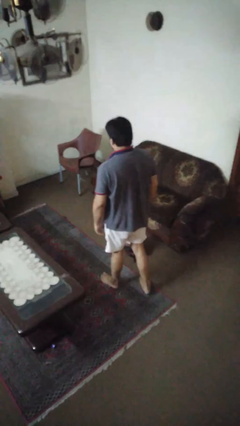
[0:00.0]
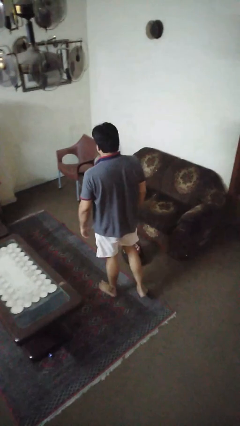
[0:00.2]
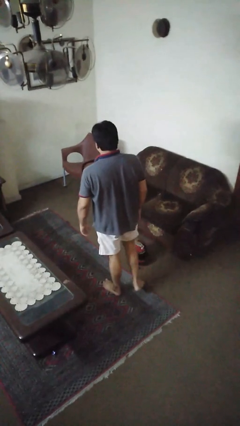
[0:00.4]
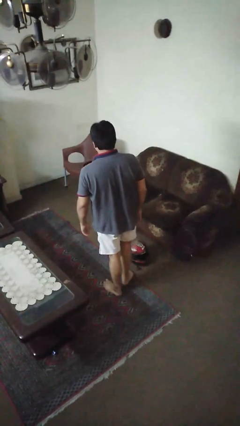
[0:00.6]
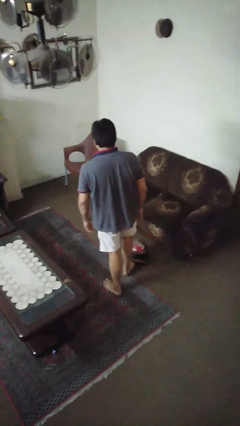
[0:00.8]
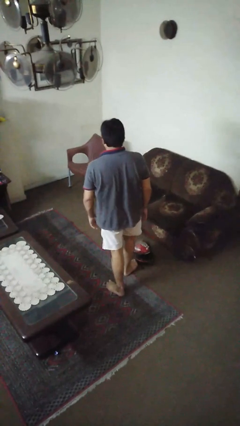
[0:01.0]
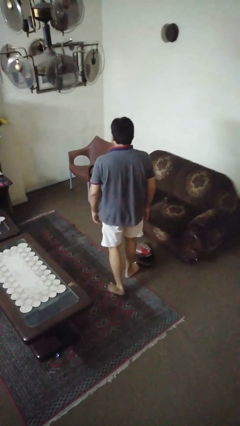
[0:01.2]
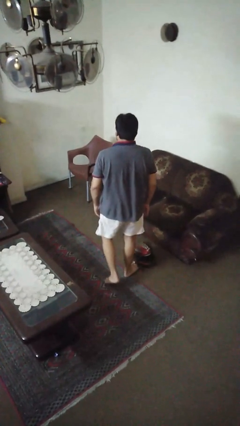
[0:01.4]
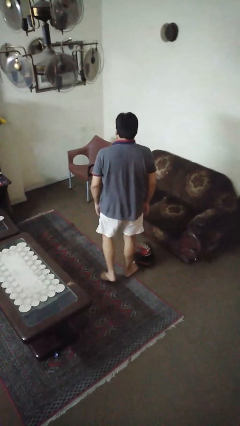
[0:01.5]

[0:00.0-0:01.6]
person trips on object on floor

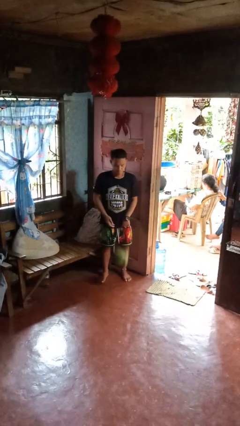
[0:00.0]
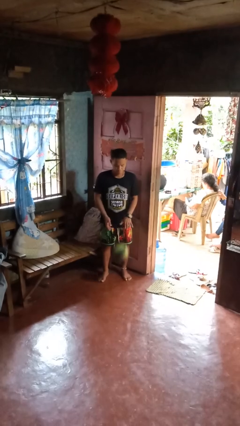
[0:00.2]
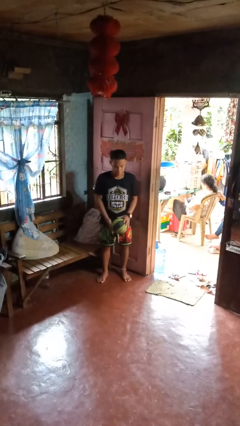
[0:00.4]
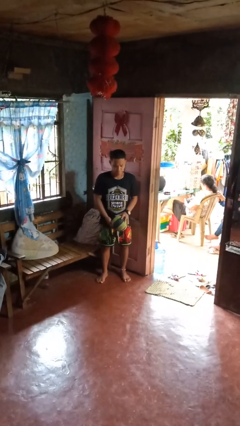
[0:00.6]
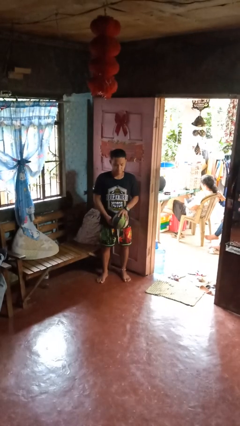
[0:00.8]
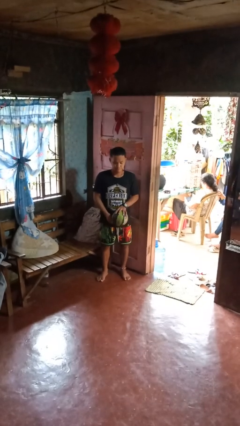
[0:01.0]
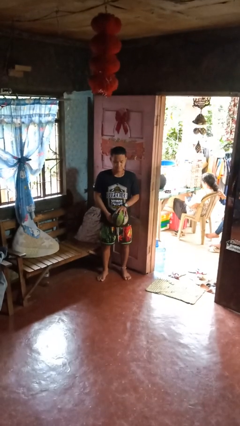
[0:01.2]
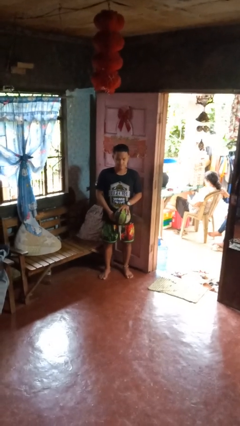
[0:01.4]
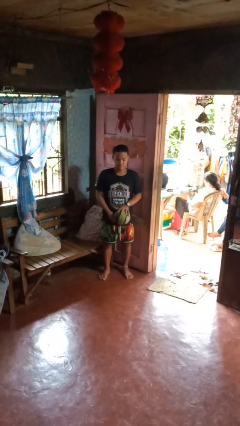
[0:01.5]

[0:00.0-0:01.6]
person bounces ball on floor

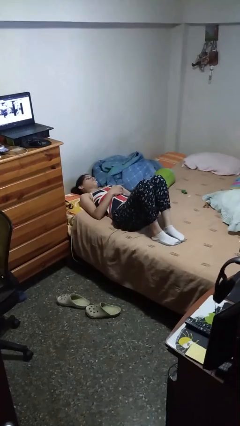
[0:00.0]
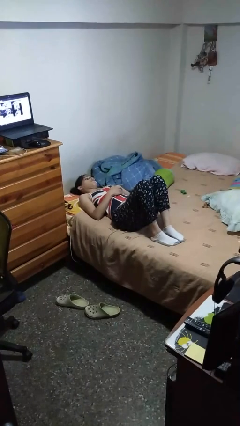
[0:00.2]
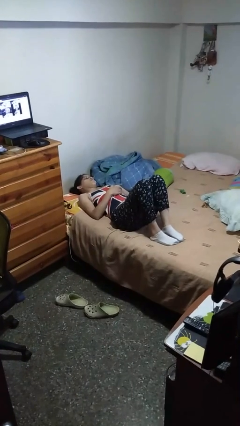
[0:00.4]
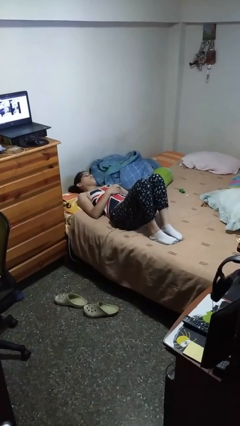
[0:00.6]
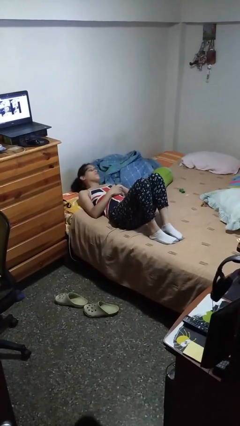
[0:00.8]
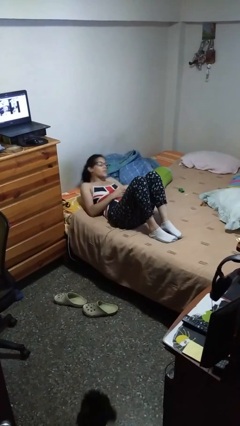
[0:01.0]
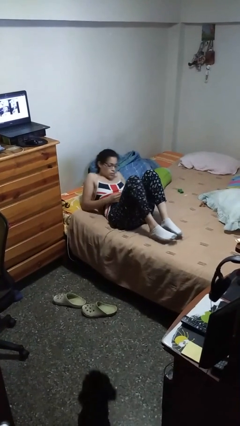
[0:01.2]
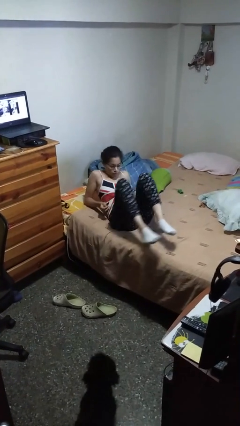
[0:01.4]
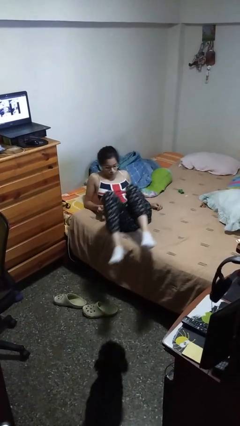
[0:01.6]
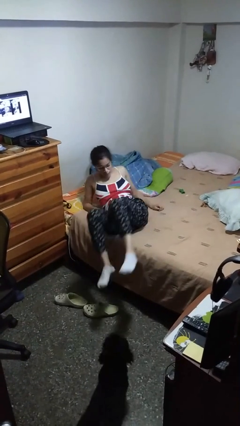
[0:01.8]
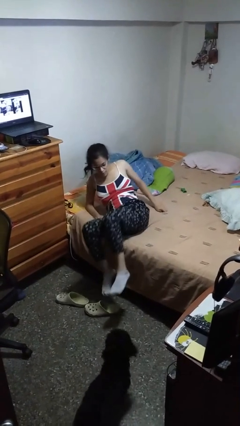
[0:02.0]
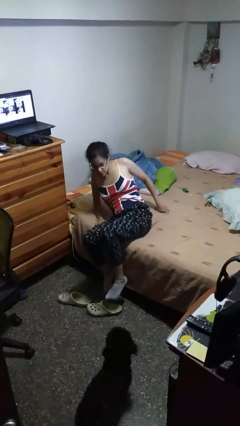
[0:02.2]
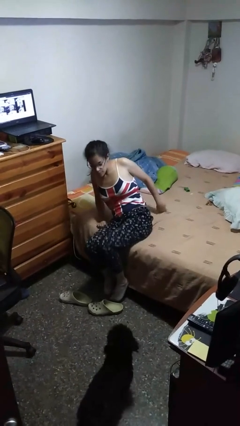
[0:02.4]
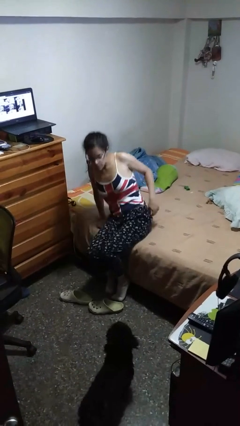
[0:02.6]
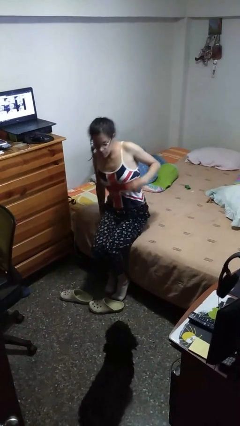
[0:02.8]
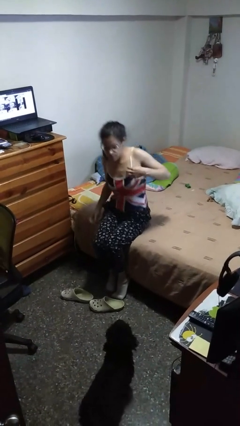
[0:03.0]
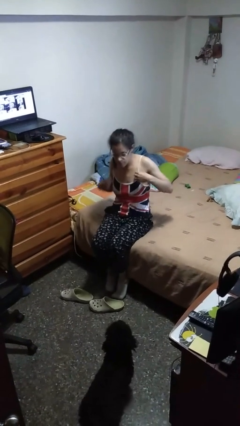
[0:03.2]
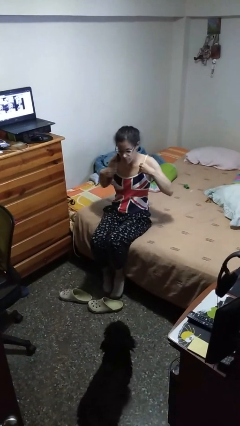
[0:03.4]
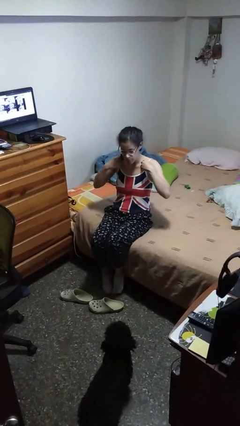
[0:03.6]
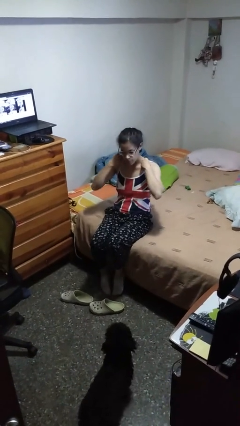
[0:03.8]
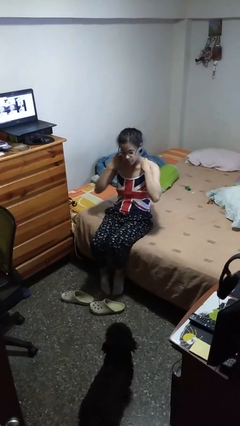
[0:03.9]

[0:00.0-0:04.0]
person stands up

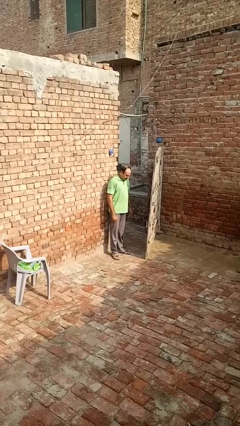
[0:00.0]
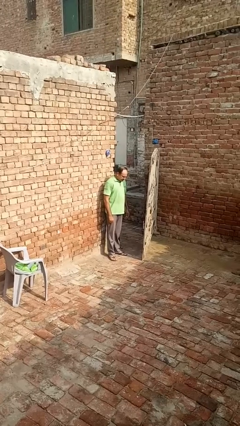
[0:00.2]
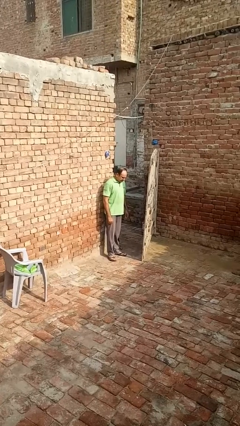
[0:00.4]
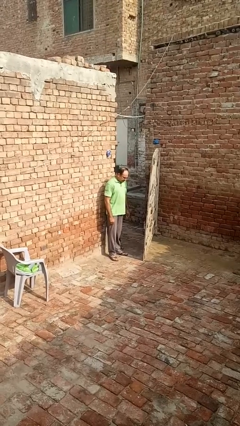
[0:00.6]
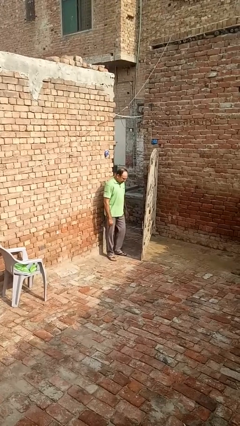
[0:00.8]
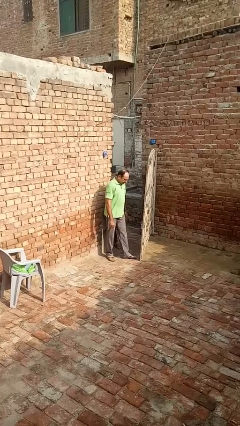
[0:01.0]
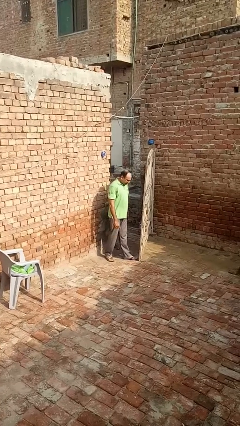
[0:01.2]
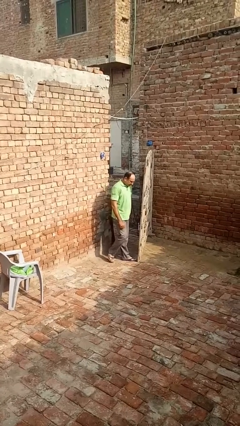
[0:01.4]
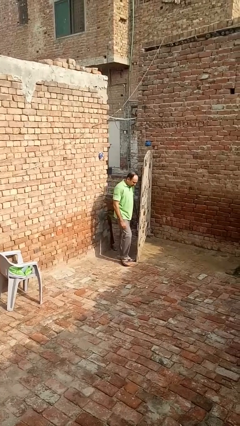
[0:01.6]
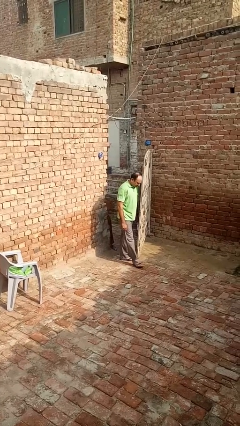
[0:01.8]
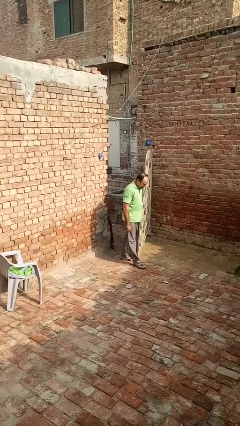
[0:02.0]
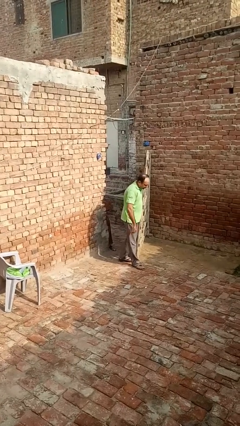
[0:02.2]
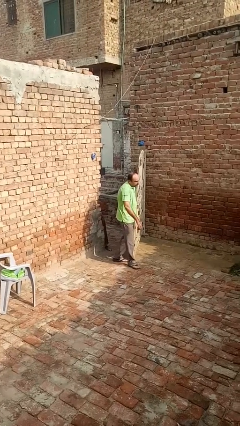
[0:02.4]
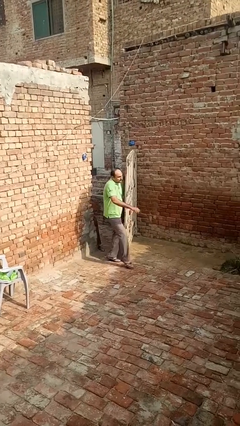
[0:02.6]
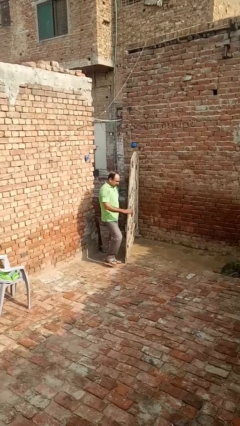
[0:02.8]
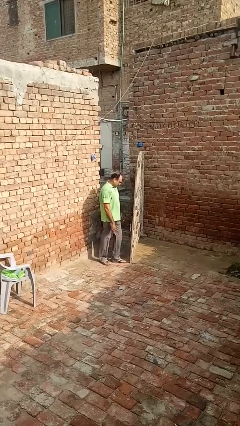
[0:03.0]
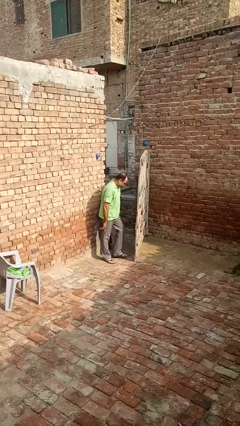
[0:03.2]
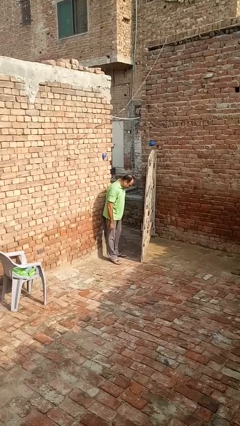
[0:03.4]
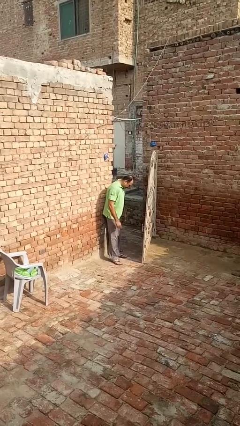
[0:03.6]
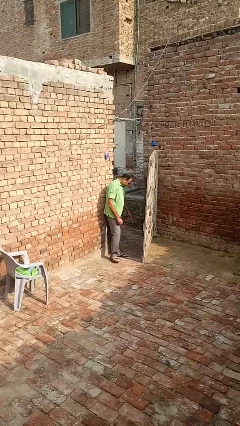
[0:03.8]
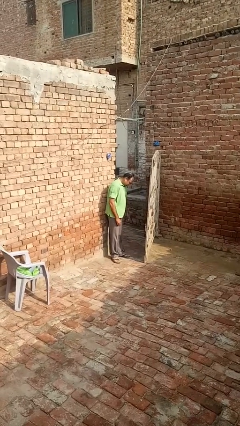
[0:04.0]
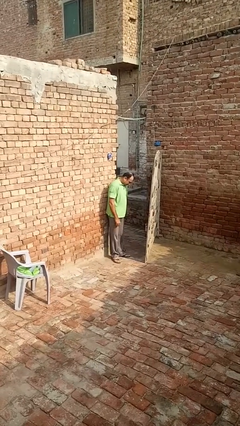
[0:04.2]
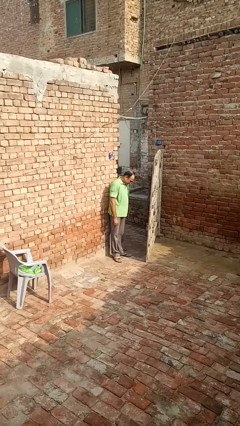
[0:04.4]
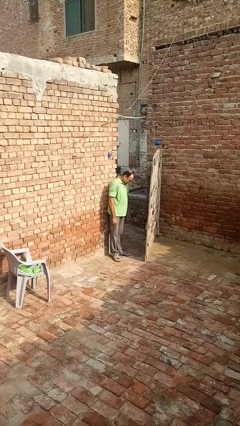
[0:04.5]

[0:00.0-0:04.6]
person bumps into wall

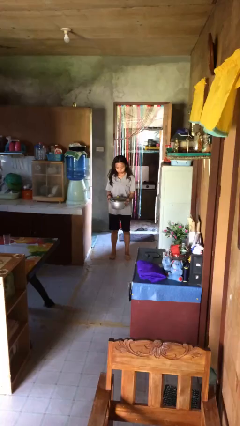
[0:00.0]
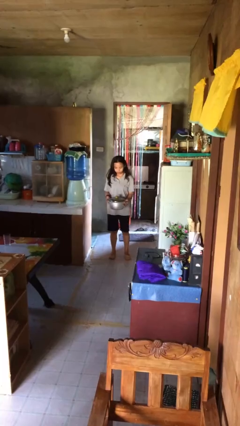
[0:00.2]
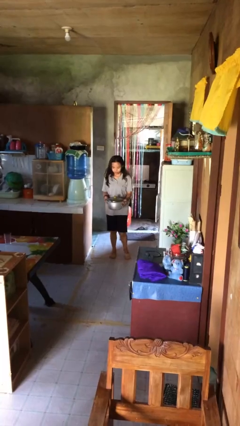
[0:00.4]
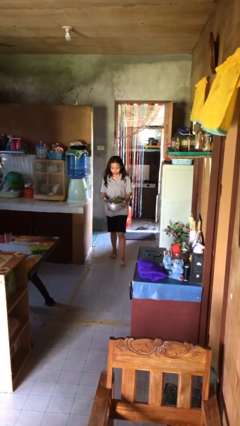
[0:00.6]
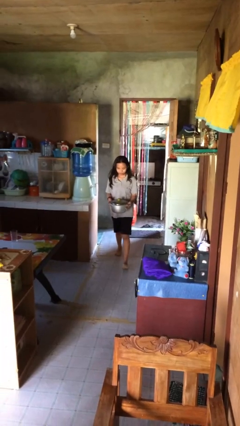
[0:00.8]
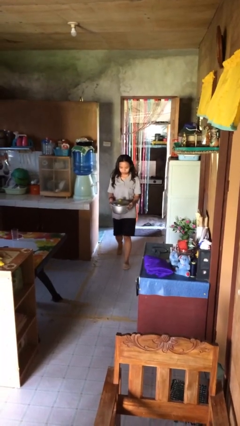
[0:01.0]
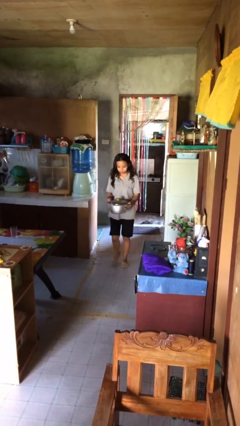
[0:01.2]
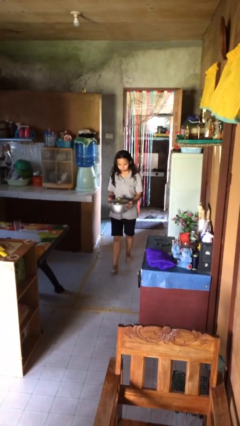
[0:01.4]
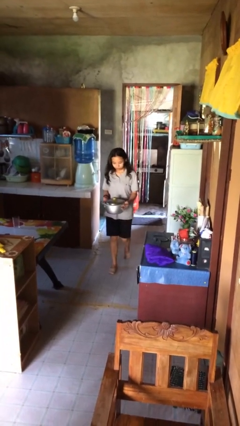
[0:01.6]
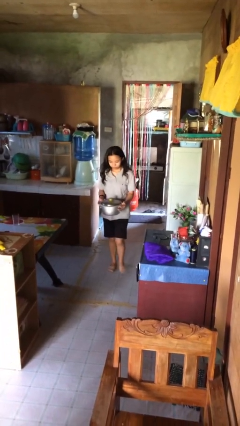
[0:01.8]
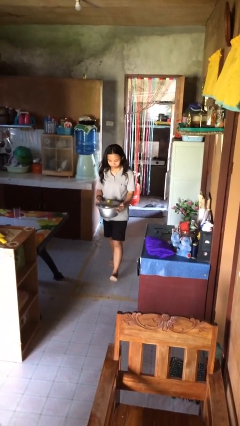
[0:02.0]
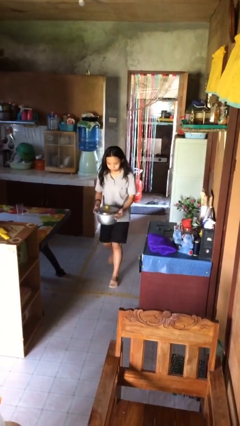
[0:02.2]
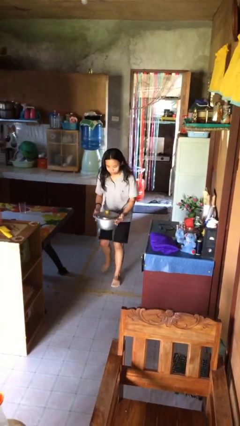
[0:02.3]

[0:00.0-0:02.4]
person carries heavy object

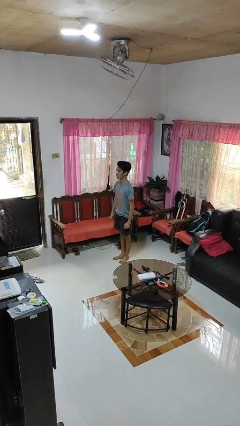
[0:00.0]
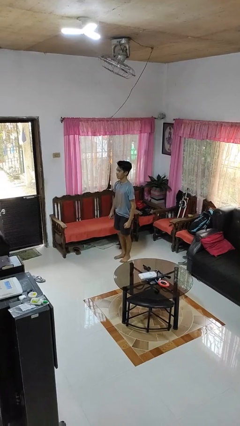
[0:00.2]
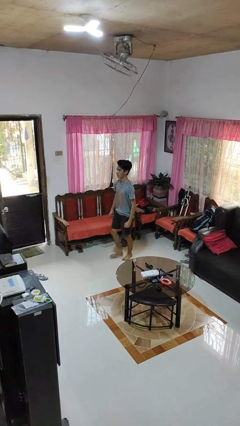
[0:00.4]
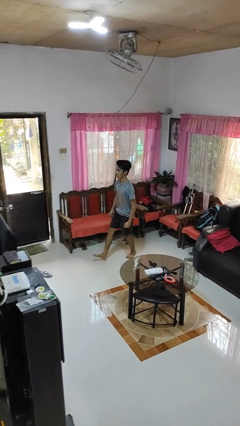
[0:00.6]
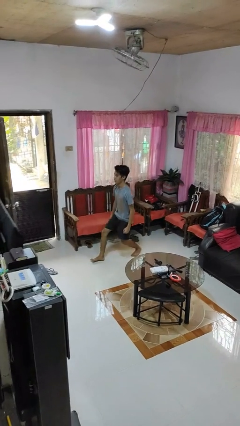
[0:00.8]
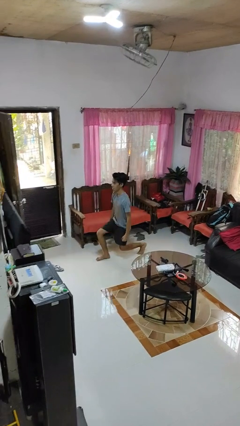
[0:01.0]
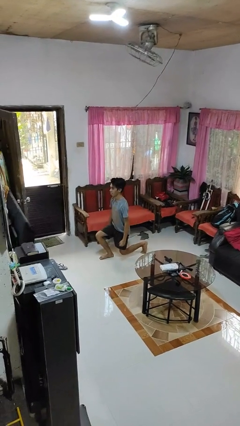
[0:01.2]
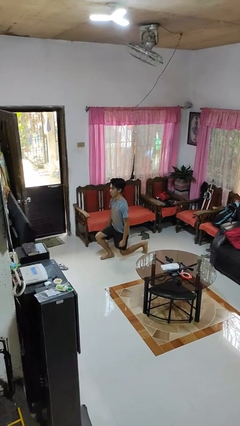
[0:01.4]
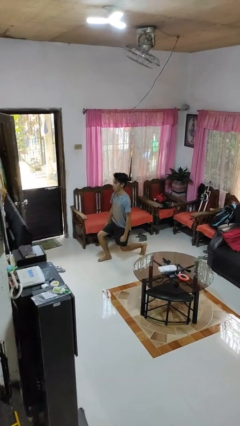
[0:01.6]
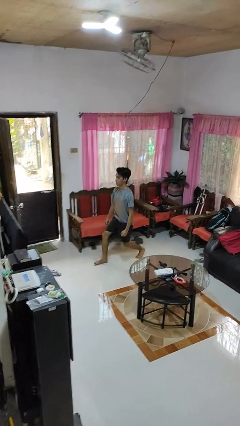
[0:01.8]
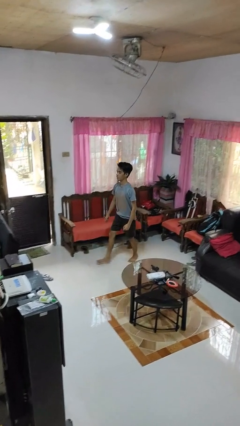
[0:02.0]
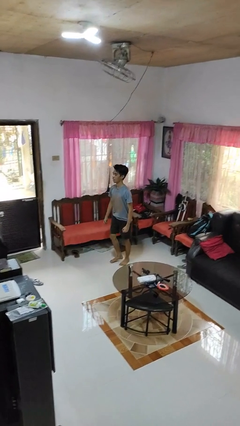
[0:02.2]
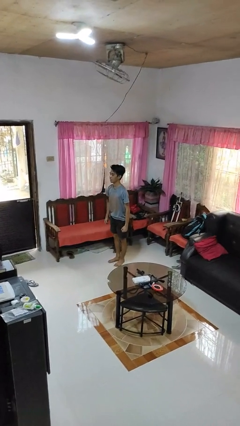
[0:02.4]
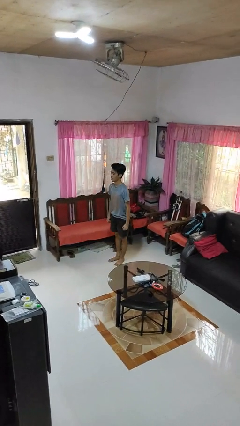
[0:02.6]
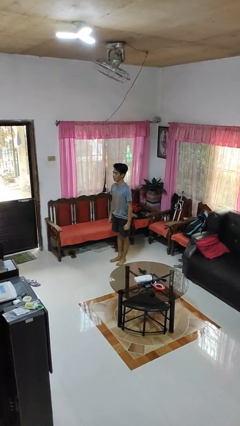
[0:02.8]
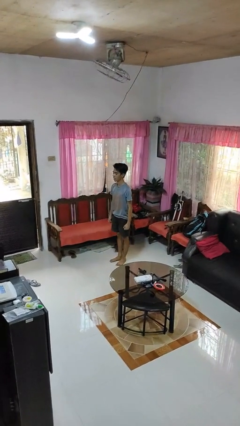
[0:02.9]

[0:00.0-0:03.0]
person exercises with lunges

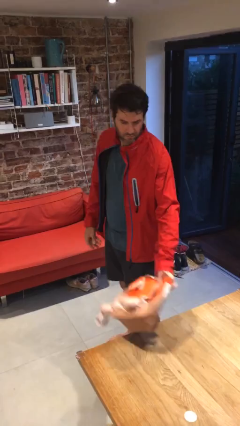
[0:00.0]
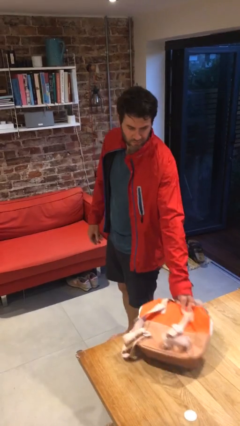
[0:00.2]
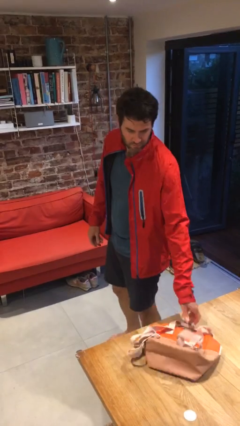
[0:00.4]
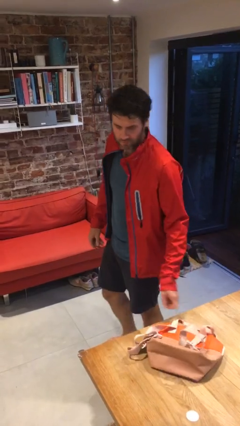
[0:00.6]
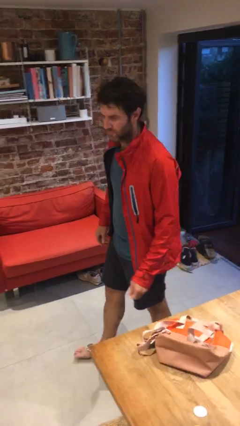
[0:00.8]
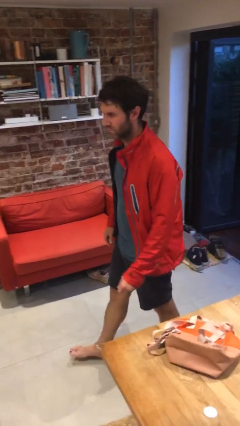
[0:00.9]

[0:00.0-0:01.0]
person puts down object on table
